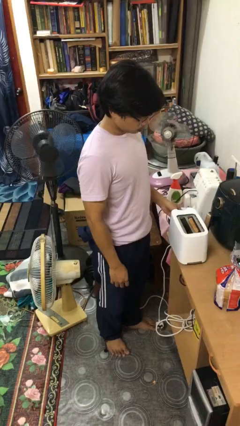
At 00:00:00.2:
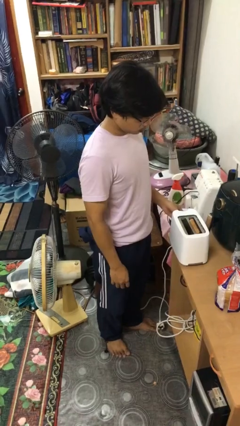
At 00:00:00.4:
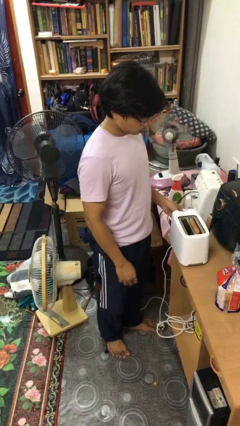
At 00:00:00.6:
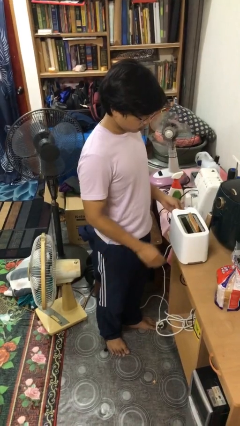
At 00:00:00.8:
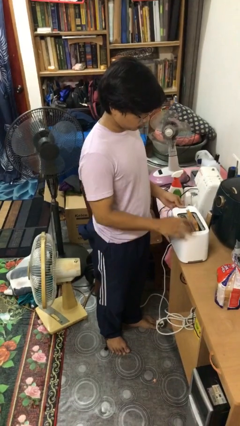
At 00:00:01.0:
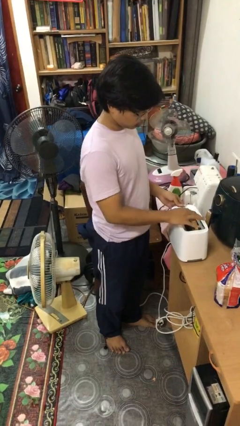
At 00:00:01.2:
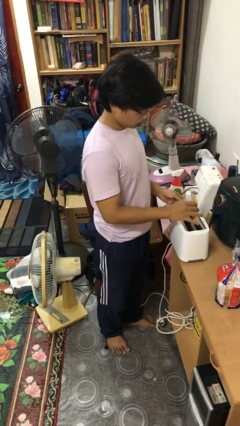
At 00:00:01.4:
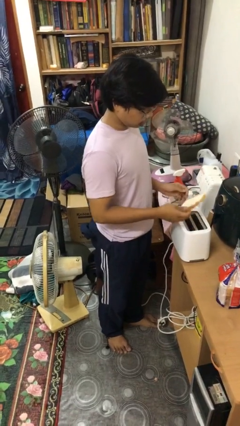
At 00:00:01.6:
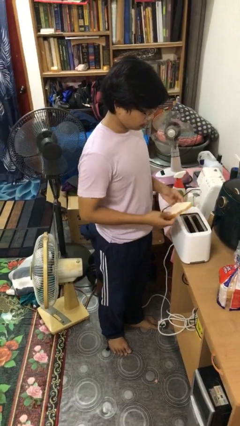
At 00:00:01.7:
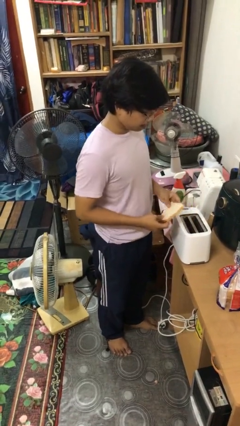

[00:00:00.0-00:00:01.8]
person takes object from toaster

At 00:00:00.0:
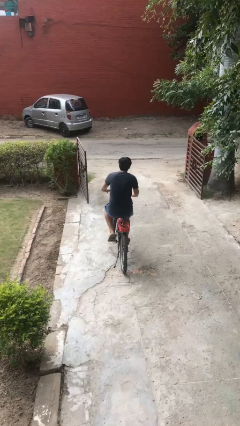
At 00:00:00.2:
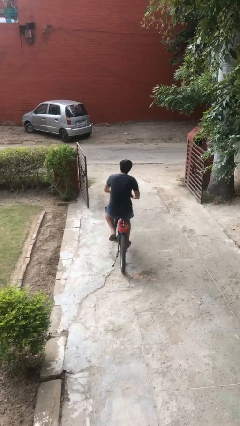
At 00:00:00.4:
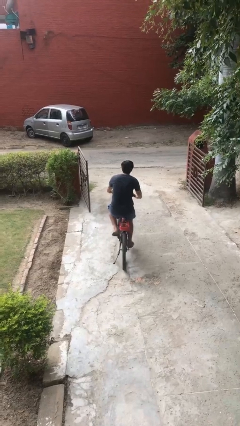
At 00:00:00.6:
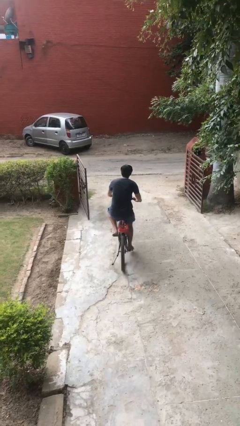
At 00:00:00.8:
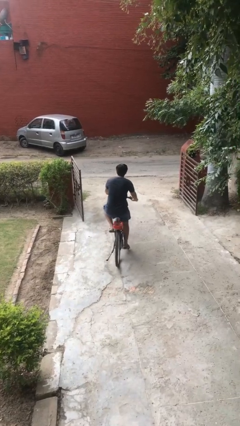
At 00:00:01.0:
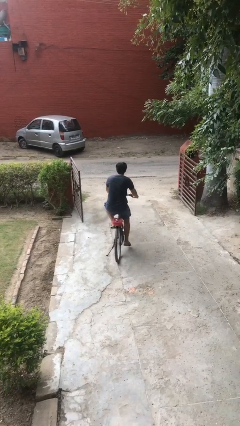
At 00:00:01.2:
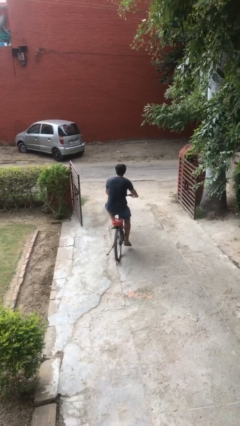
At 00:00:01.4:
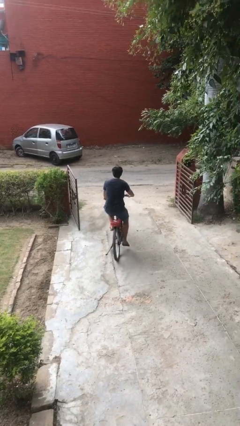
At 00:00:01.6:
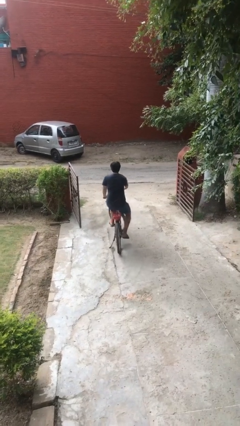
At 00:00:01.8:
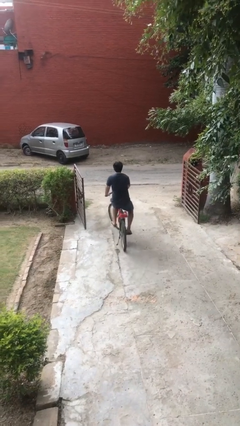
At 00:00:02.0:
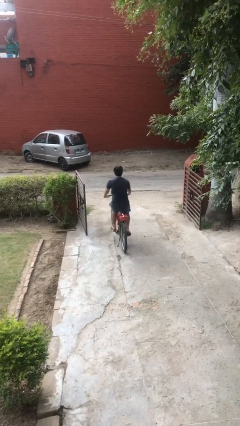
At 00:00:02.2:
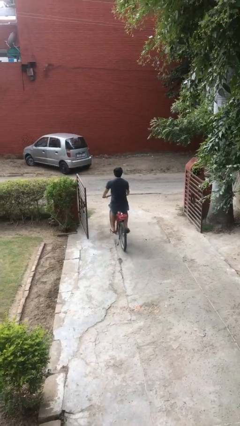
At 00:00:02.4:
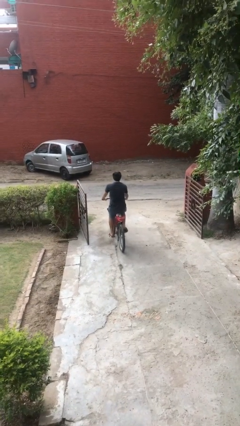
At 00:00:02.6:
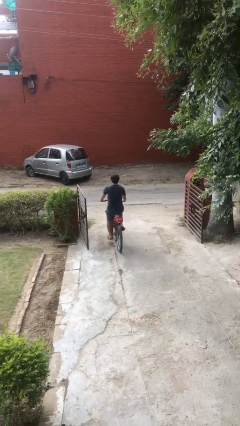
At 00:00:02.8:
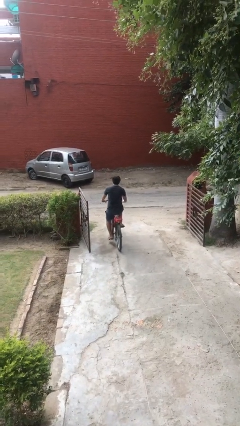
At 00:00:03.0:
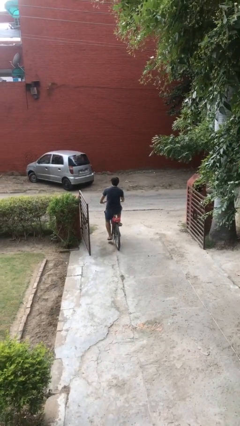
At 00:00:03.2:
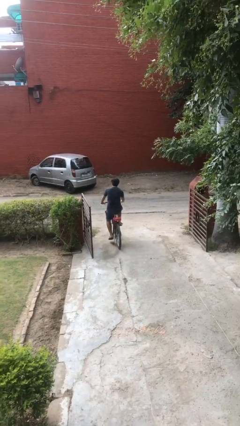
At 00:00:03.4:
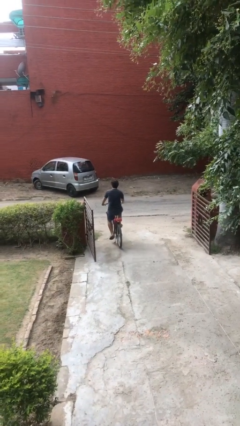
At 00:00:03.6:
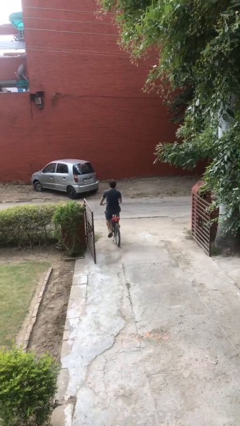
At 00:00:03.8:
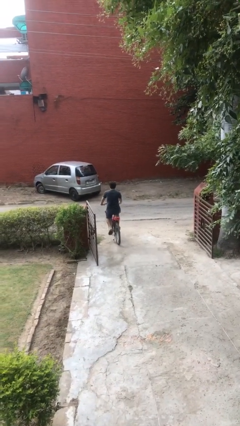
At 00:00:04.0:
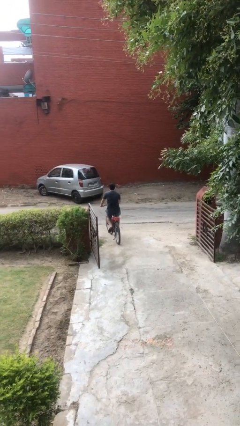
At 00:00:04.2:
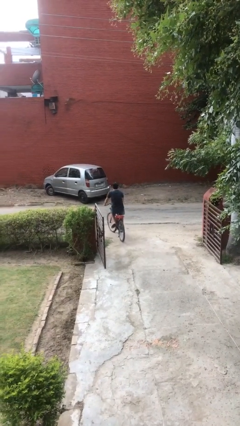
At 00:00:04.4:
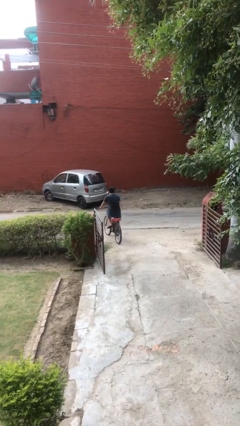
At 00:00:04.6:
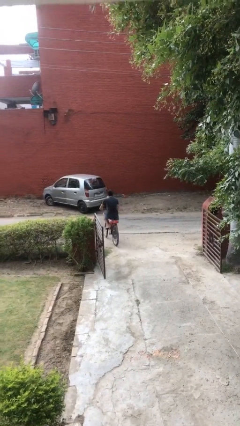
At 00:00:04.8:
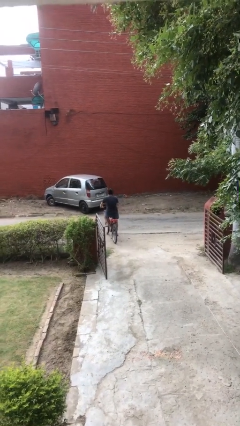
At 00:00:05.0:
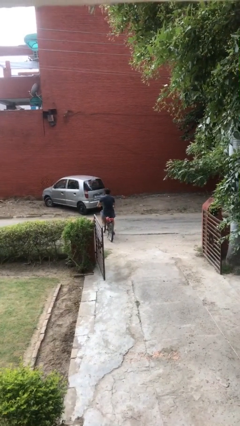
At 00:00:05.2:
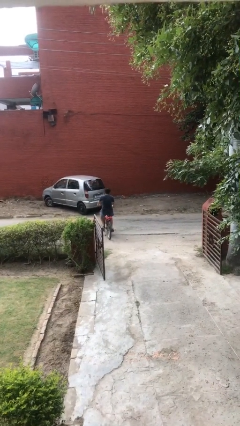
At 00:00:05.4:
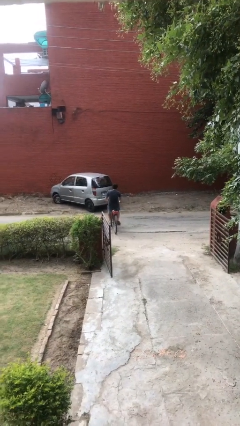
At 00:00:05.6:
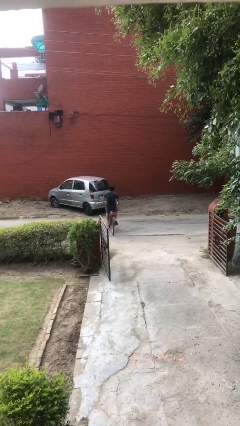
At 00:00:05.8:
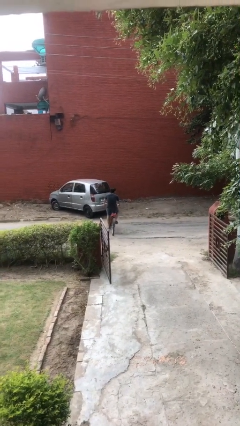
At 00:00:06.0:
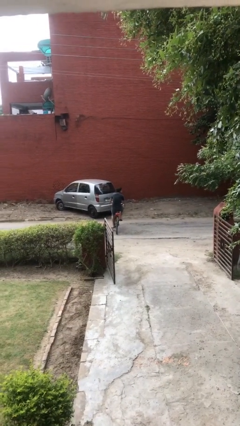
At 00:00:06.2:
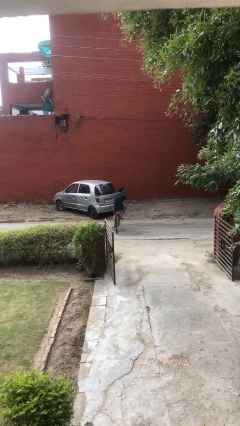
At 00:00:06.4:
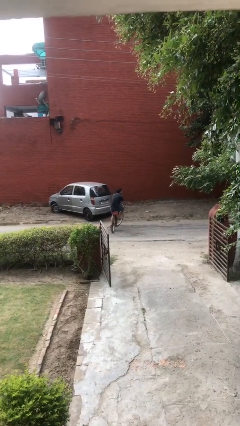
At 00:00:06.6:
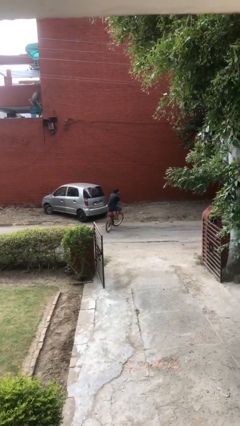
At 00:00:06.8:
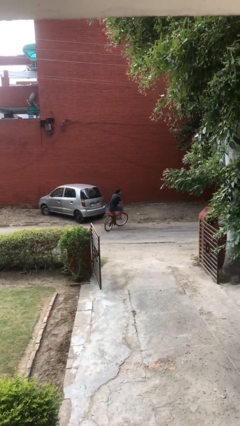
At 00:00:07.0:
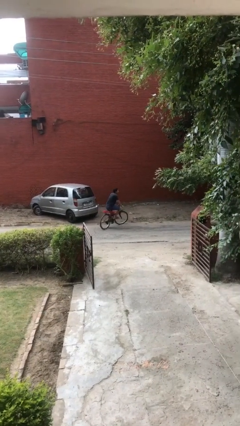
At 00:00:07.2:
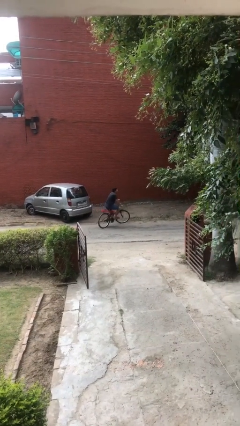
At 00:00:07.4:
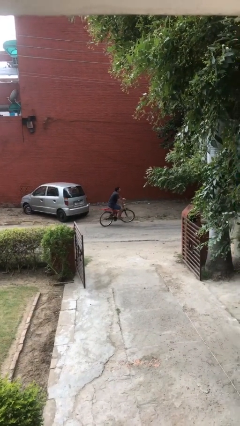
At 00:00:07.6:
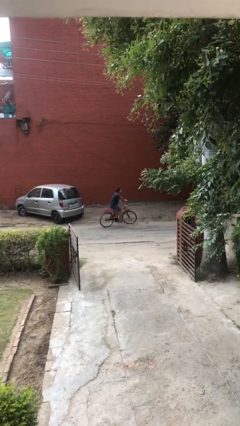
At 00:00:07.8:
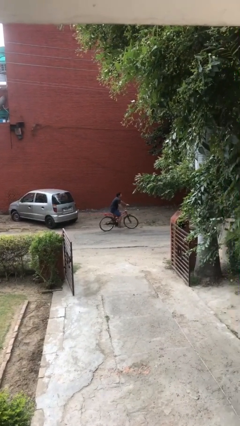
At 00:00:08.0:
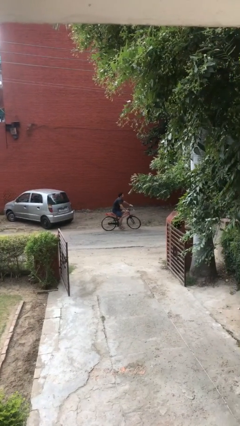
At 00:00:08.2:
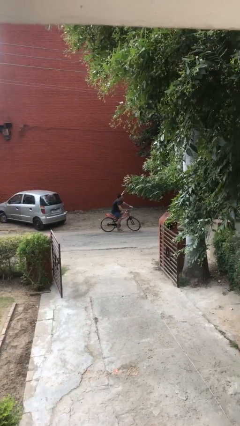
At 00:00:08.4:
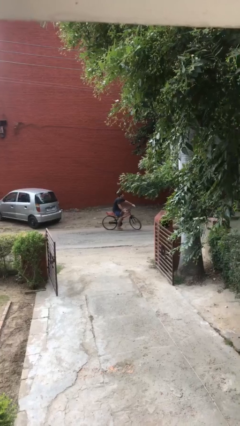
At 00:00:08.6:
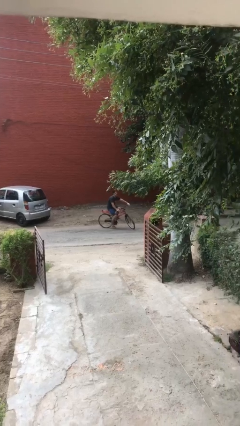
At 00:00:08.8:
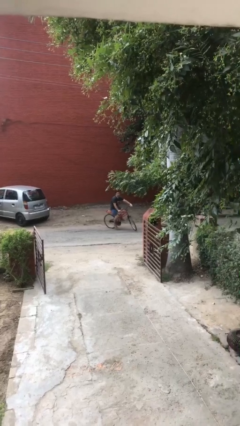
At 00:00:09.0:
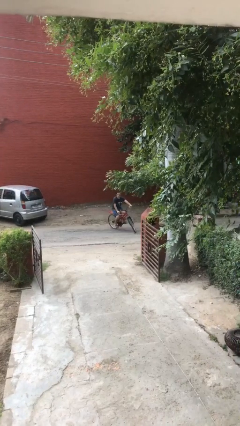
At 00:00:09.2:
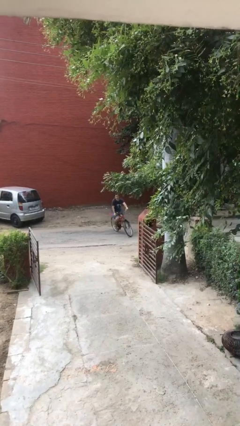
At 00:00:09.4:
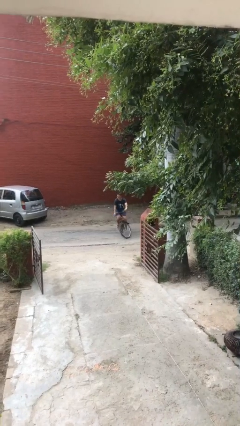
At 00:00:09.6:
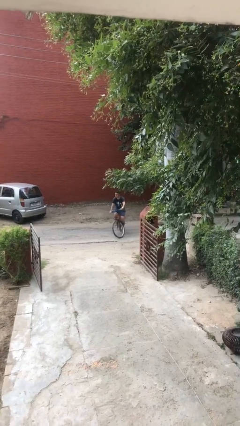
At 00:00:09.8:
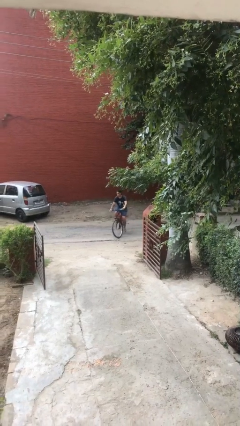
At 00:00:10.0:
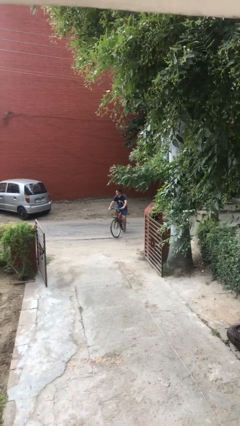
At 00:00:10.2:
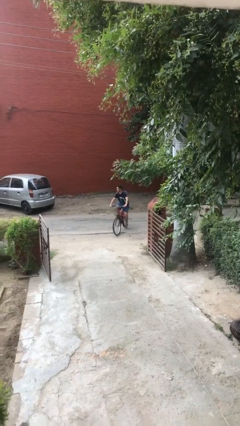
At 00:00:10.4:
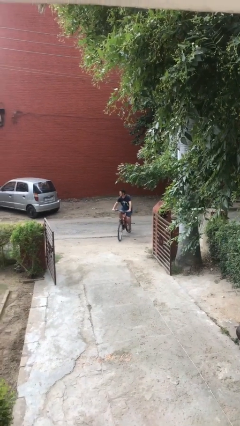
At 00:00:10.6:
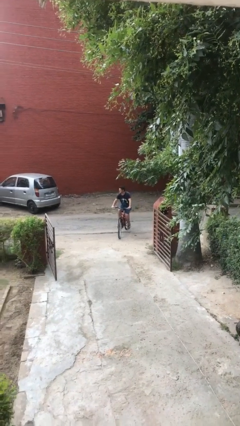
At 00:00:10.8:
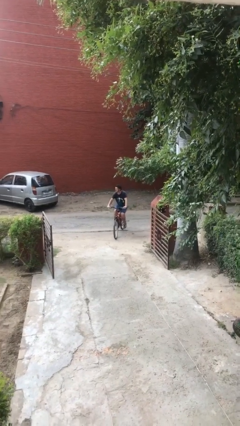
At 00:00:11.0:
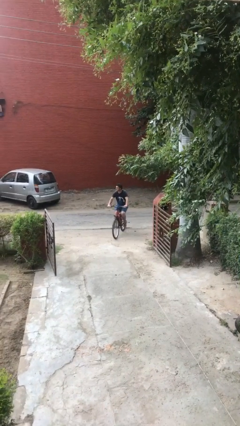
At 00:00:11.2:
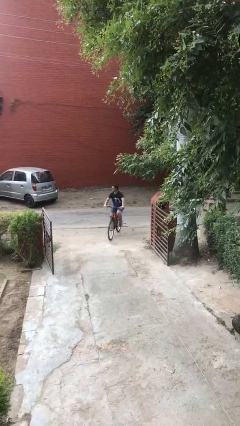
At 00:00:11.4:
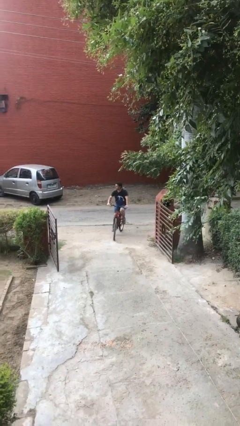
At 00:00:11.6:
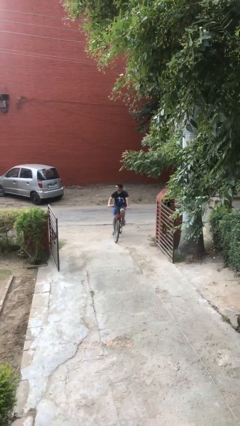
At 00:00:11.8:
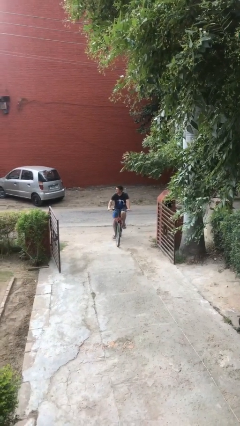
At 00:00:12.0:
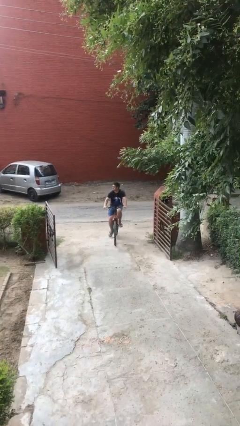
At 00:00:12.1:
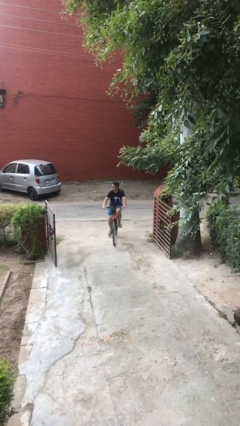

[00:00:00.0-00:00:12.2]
person rides bicycle

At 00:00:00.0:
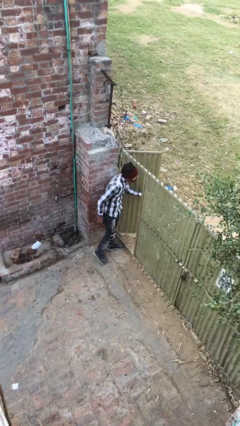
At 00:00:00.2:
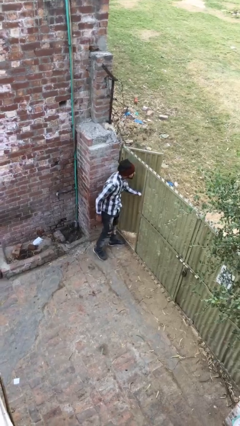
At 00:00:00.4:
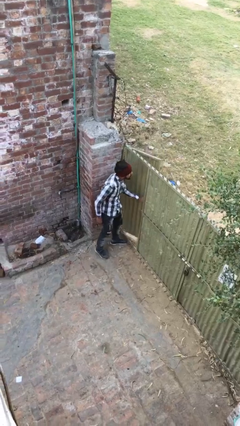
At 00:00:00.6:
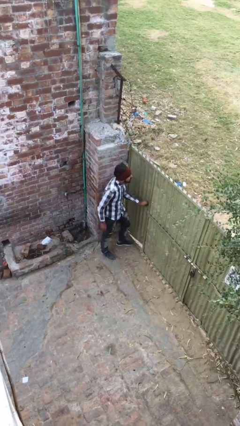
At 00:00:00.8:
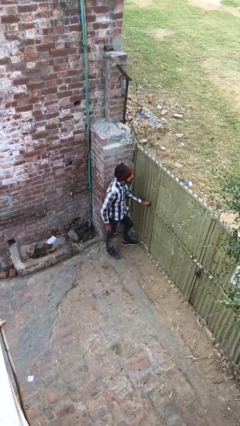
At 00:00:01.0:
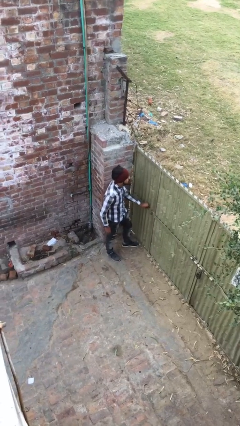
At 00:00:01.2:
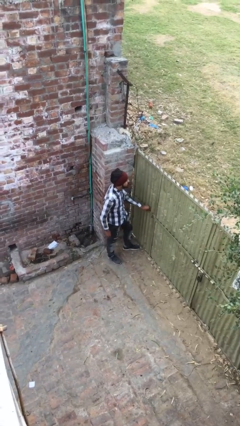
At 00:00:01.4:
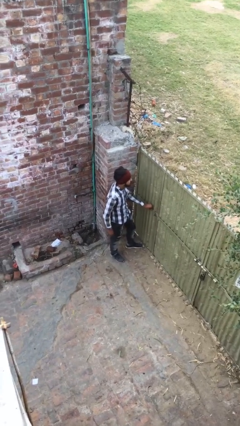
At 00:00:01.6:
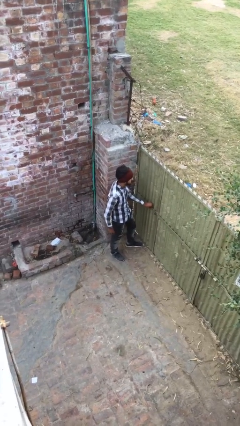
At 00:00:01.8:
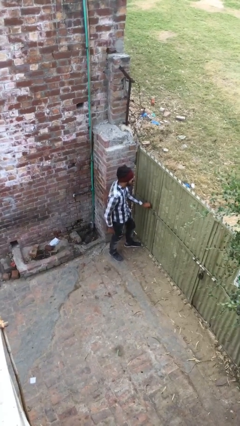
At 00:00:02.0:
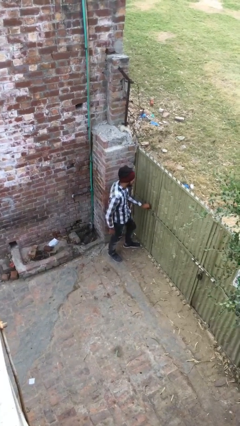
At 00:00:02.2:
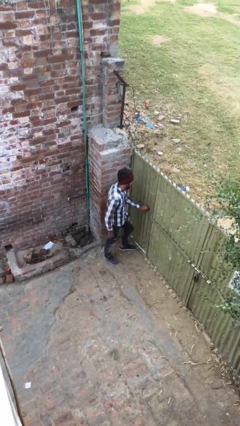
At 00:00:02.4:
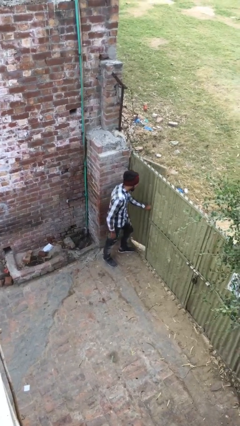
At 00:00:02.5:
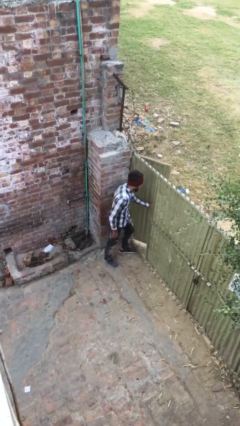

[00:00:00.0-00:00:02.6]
person closes facility door

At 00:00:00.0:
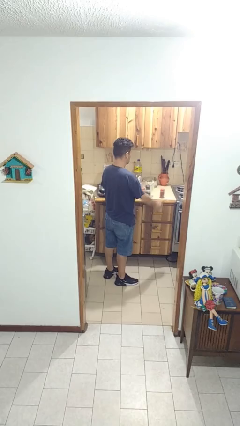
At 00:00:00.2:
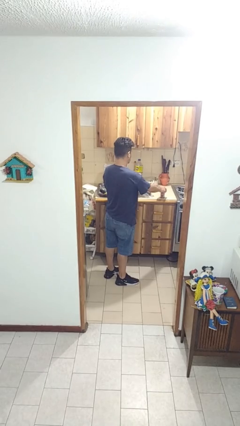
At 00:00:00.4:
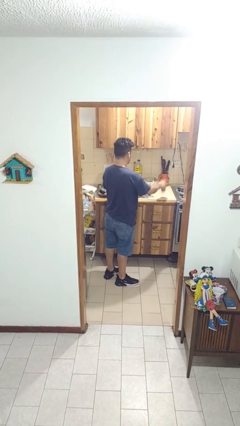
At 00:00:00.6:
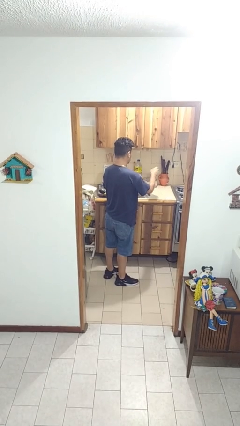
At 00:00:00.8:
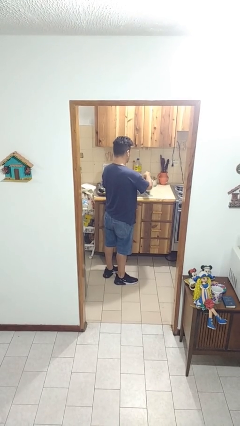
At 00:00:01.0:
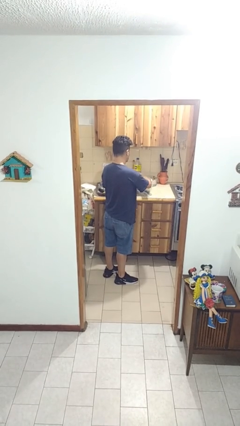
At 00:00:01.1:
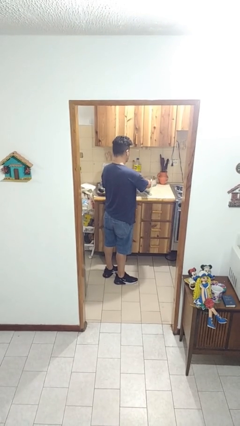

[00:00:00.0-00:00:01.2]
person puts object into bag
